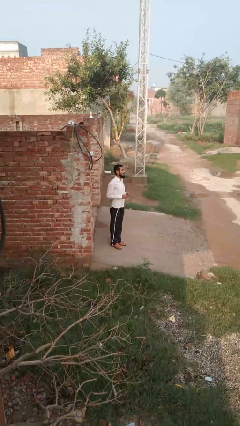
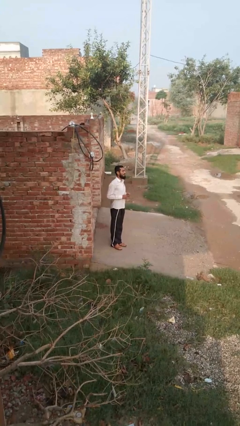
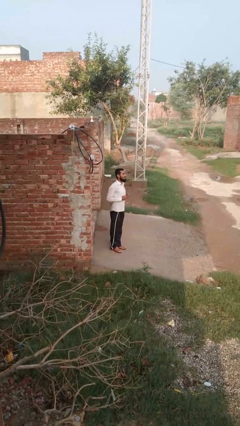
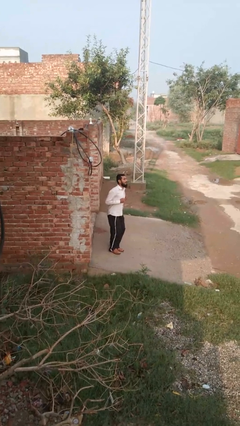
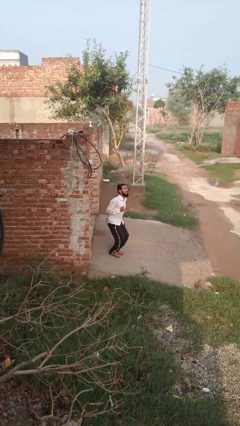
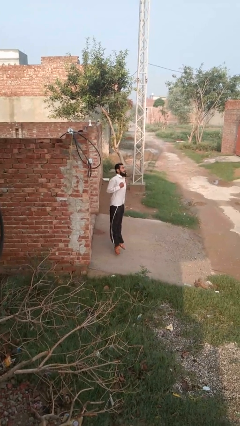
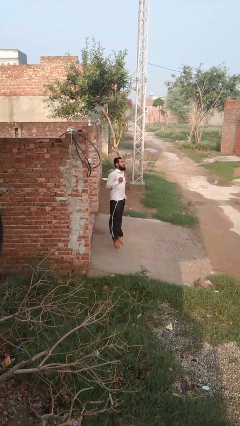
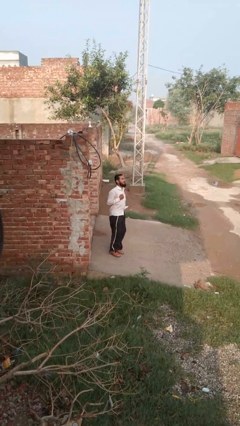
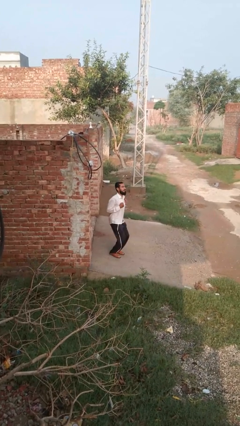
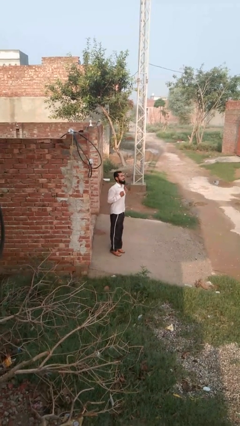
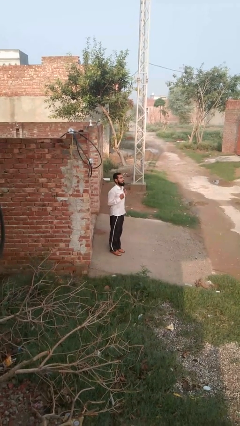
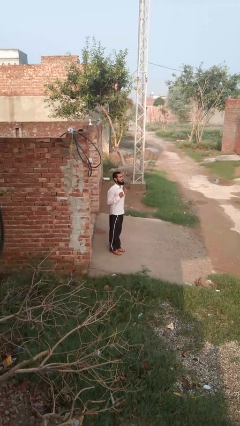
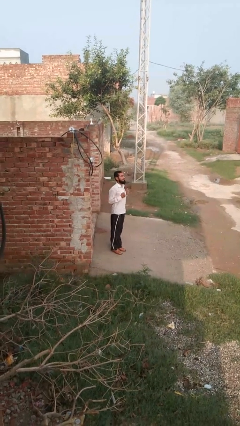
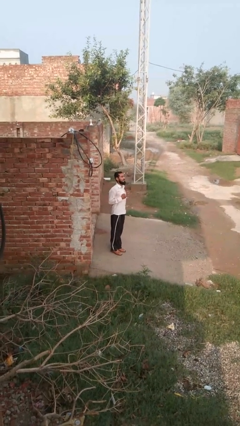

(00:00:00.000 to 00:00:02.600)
person jumps

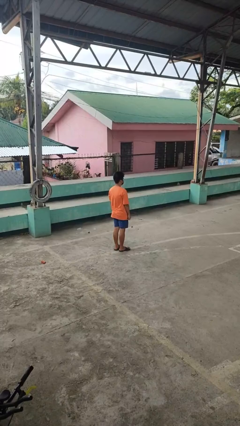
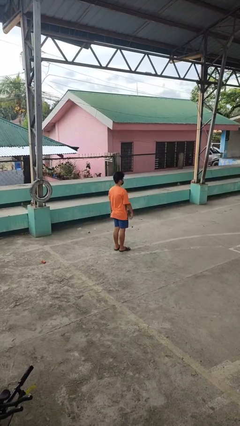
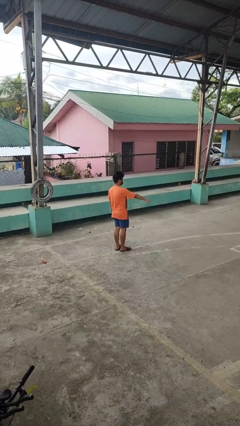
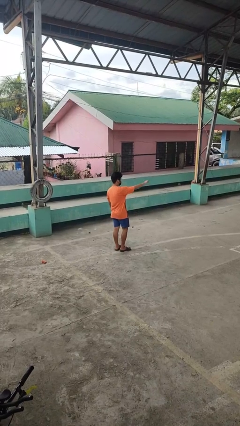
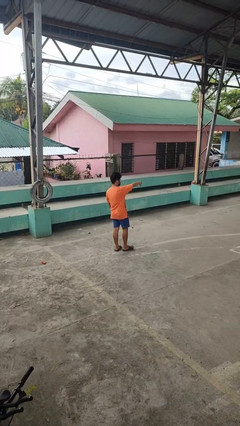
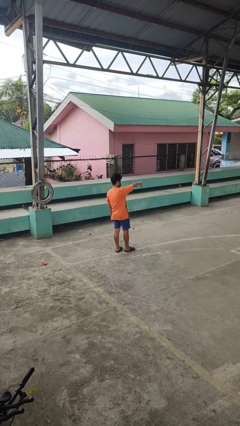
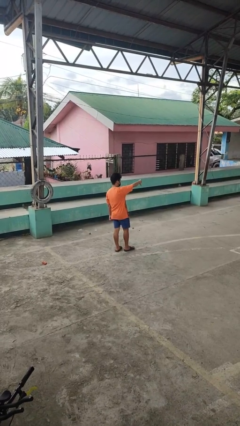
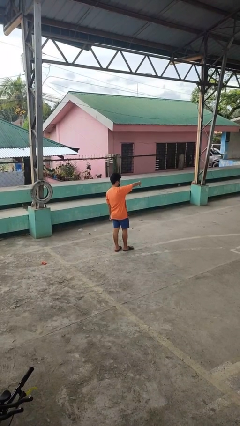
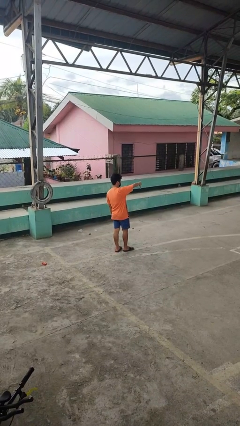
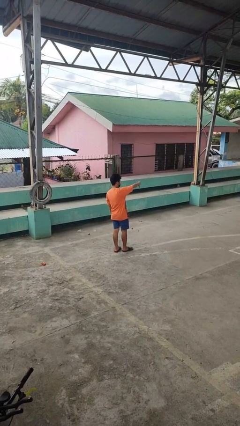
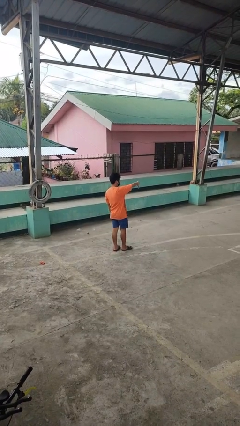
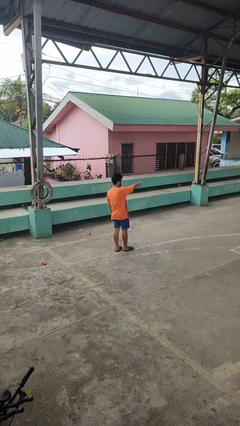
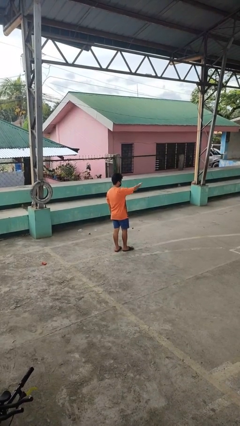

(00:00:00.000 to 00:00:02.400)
person gestures thumbs down

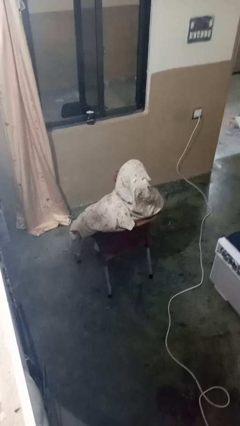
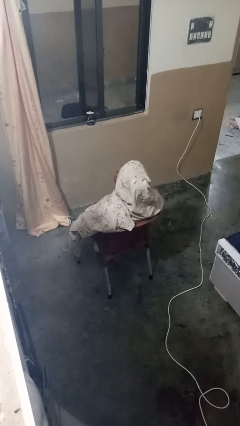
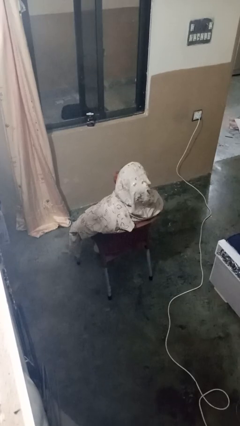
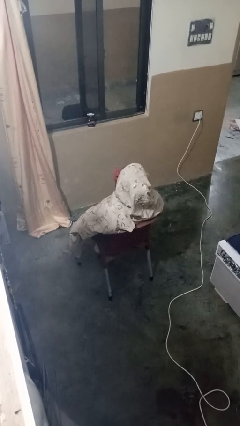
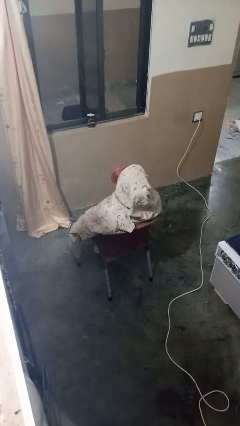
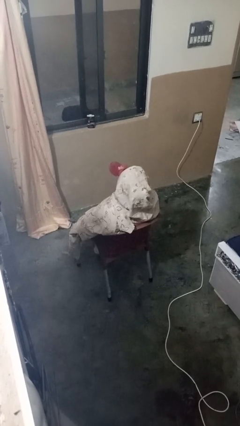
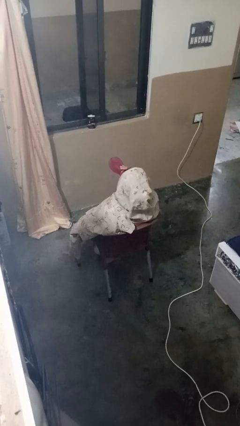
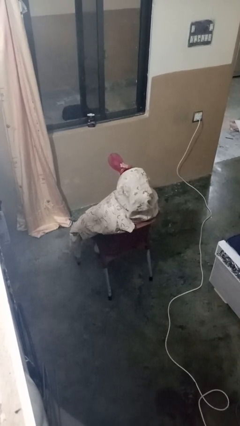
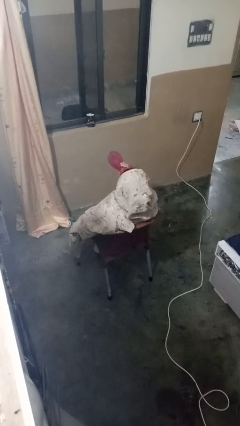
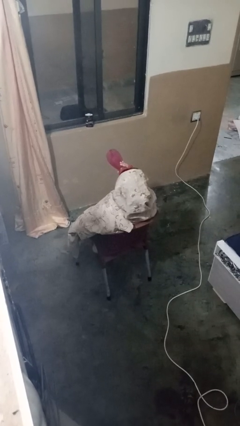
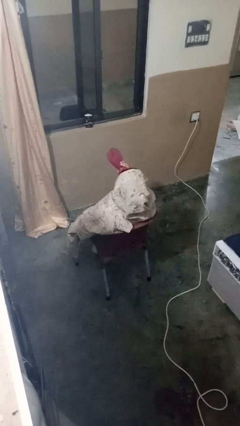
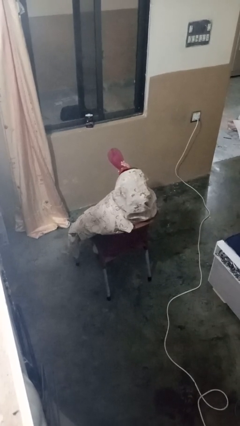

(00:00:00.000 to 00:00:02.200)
person drinks from bottle

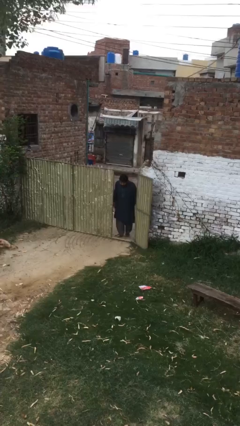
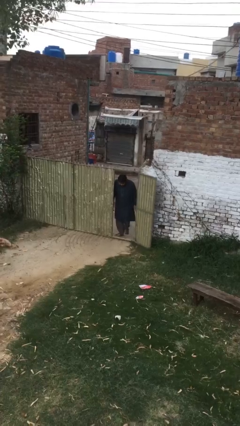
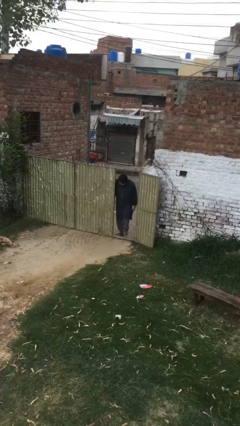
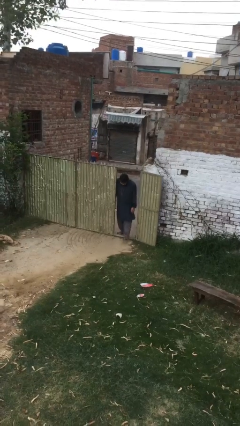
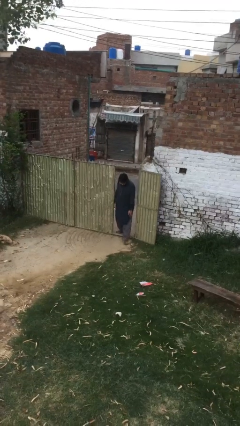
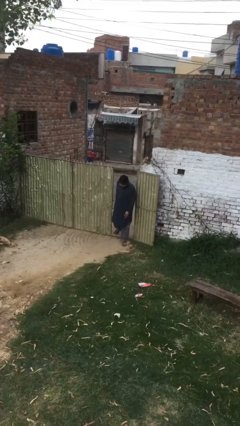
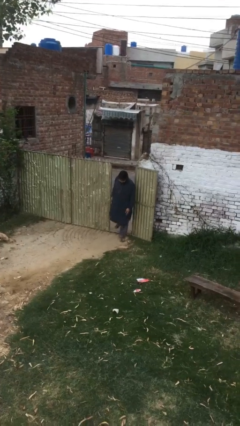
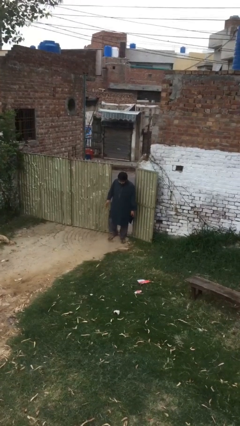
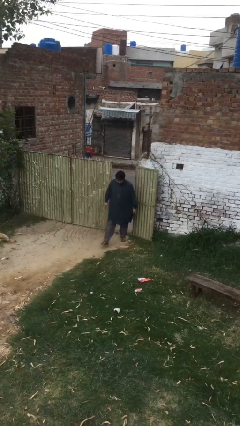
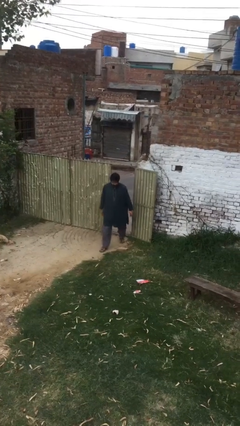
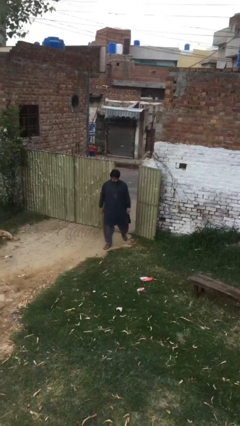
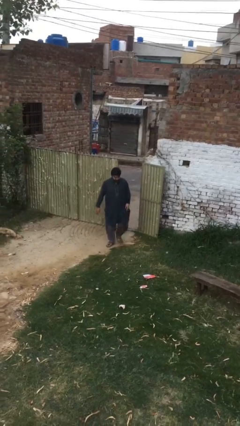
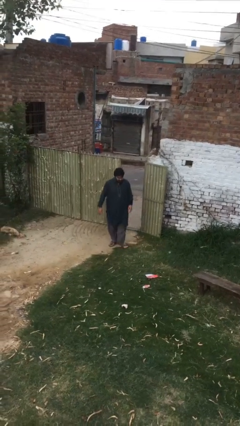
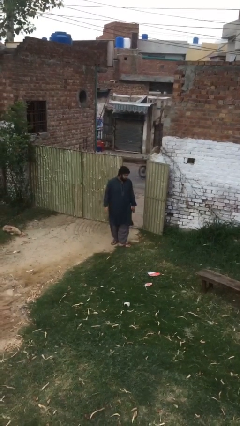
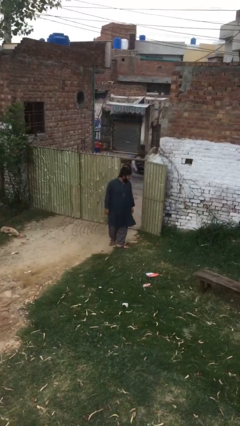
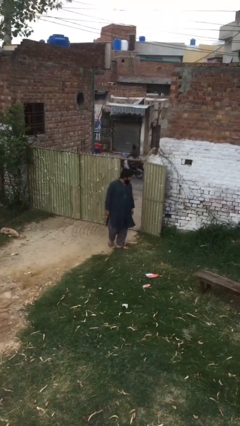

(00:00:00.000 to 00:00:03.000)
person enters scene through structure

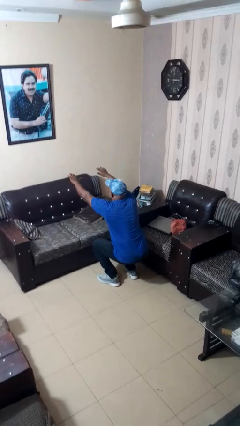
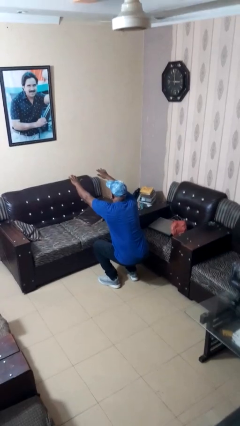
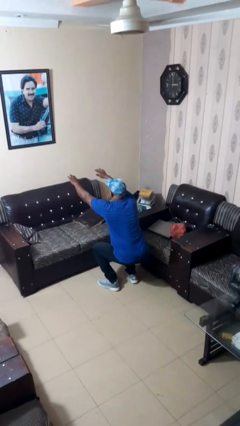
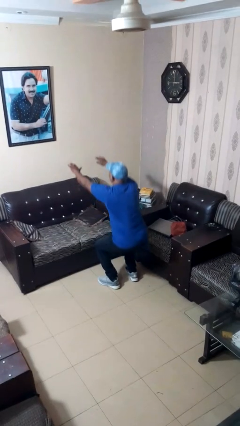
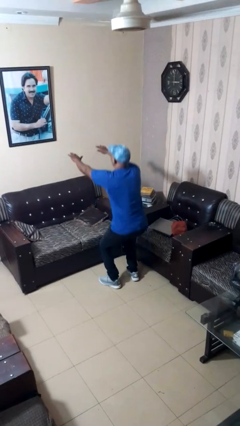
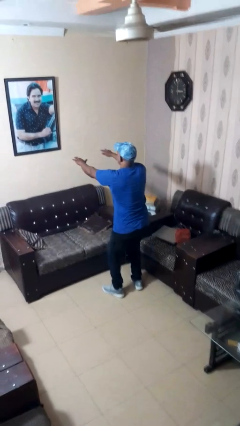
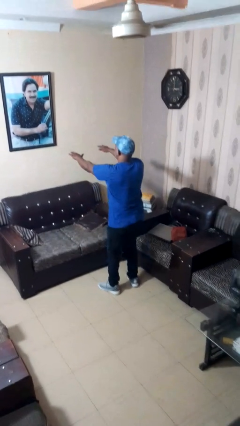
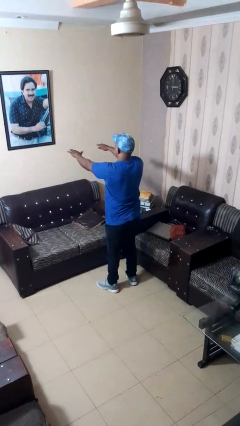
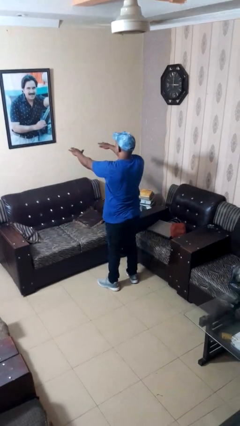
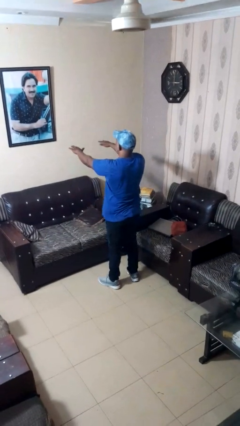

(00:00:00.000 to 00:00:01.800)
person stands up

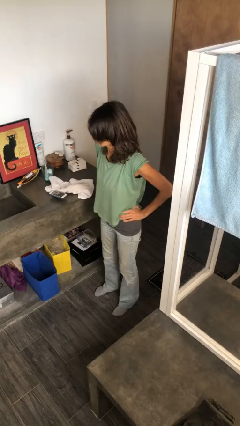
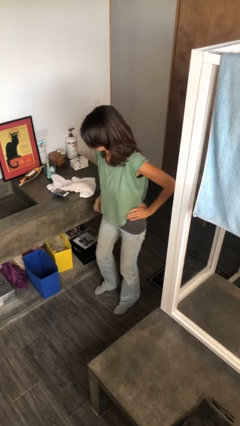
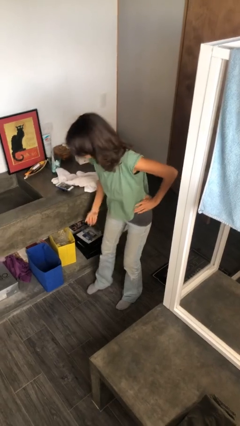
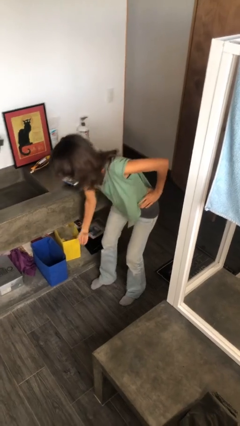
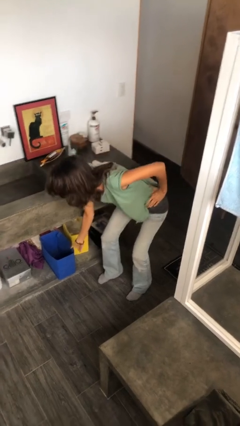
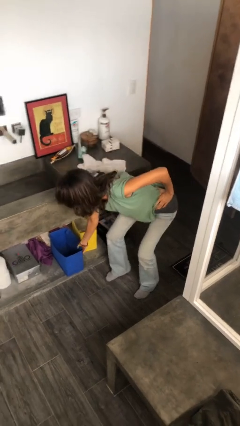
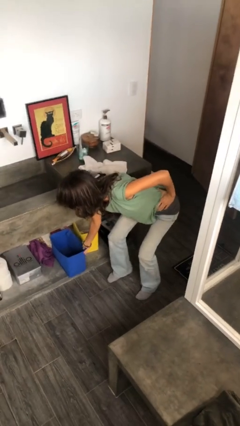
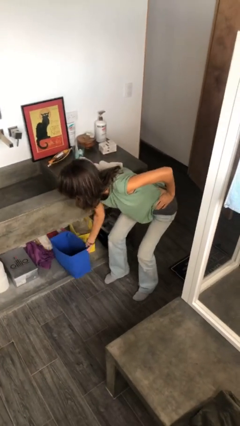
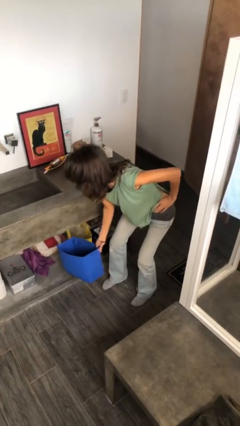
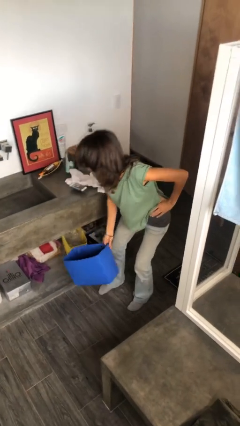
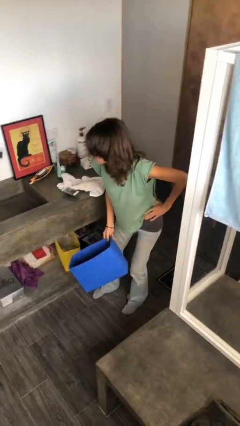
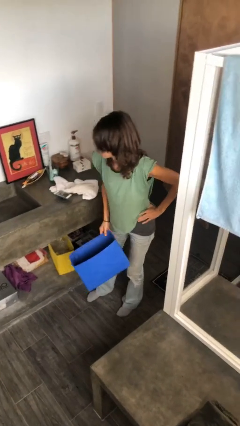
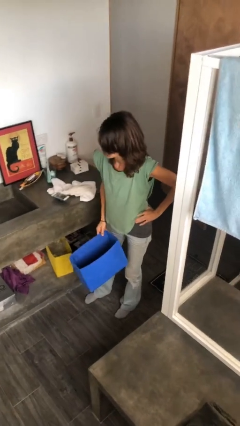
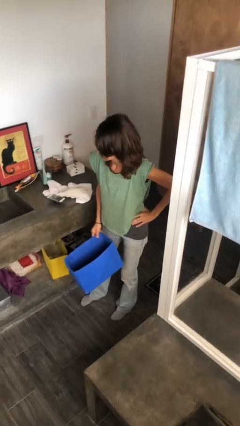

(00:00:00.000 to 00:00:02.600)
person picks up object from cabinet

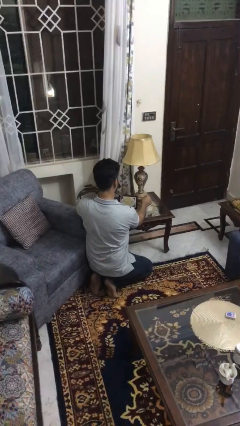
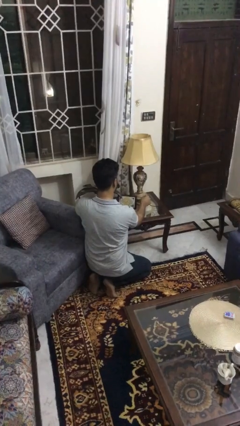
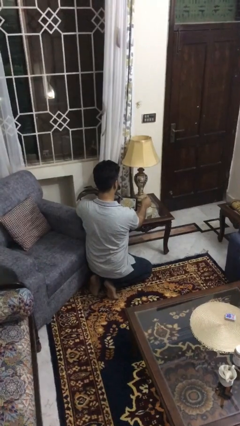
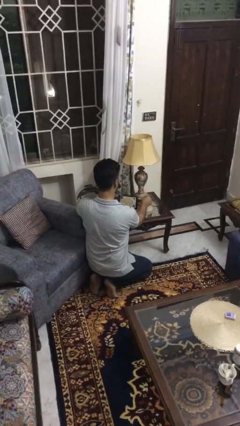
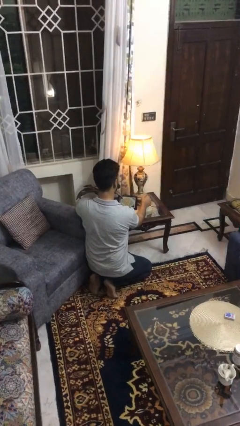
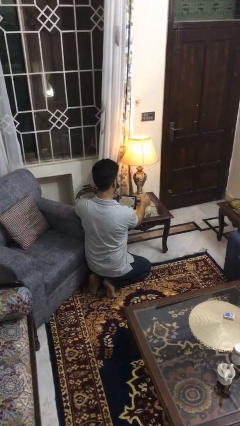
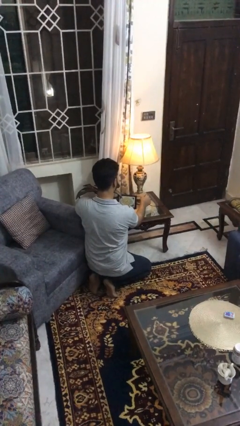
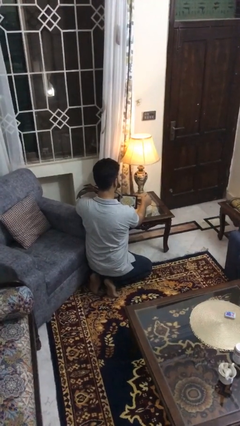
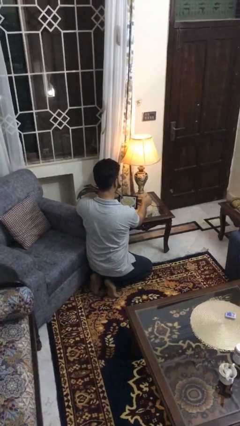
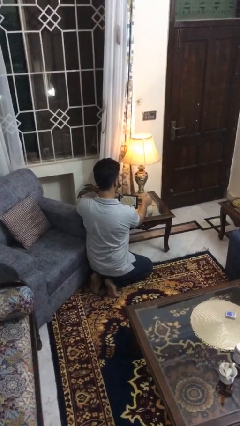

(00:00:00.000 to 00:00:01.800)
person turns on lamp

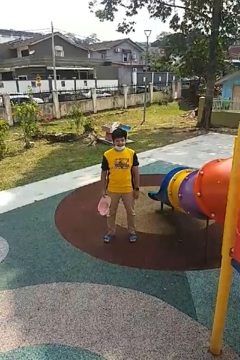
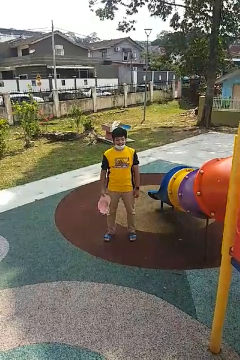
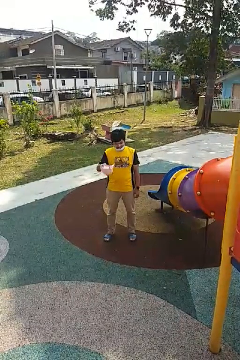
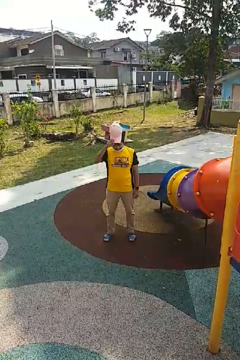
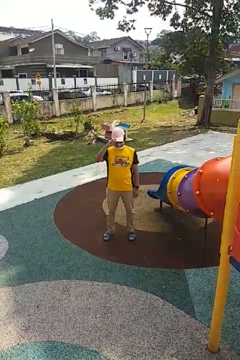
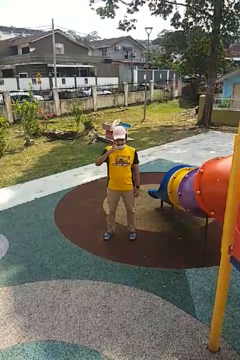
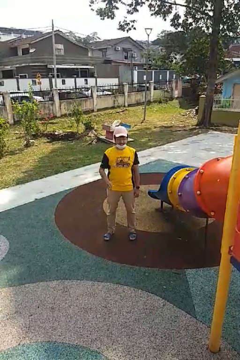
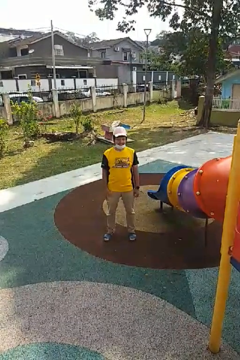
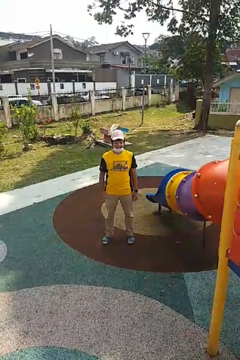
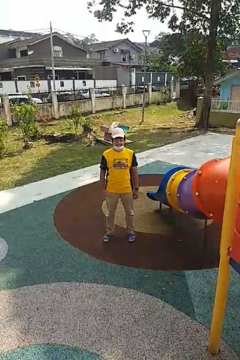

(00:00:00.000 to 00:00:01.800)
person puts on hat
